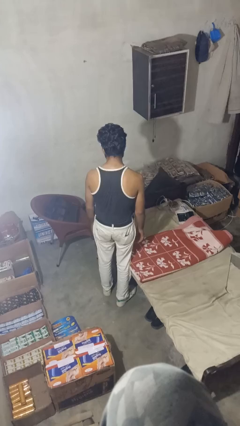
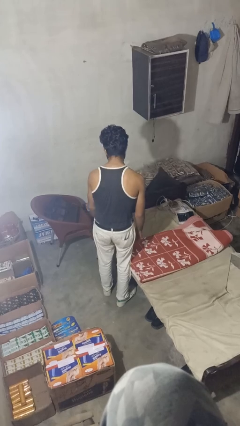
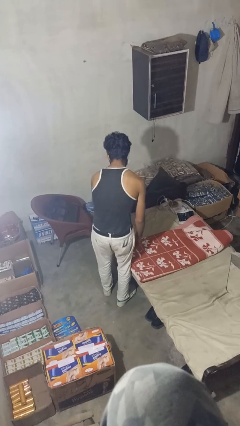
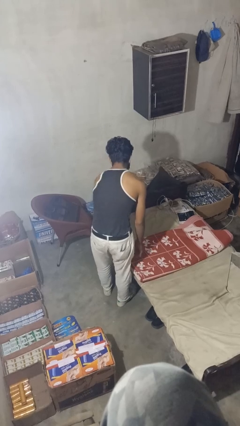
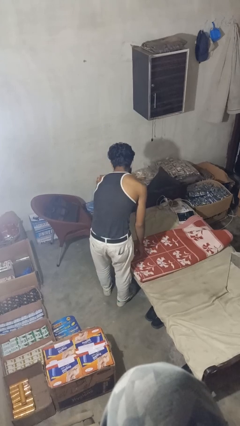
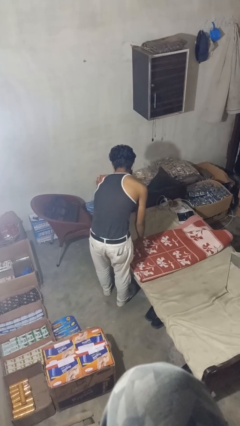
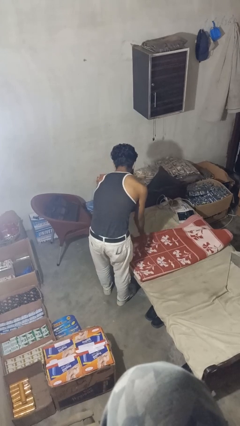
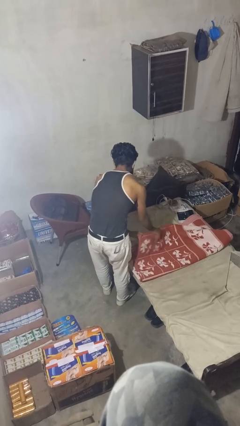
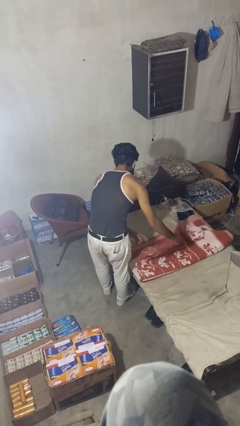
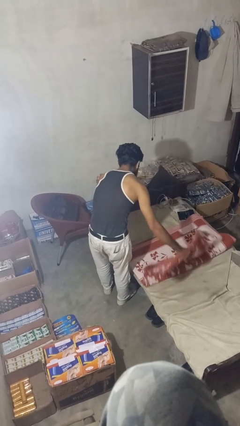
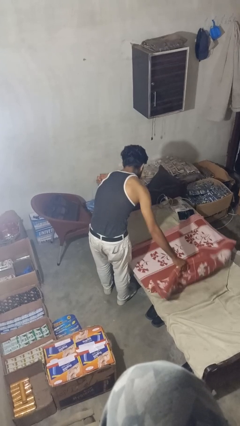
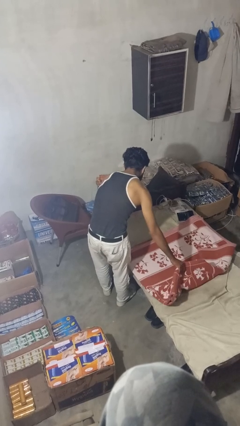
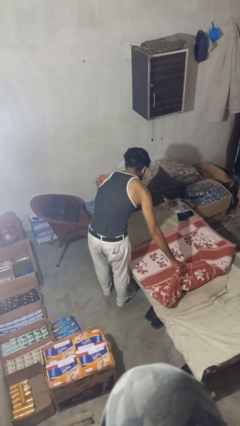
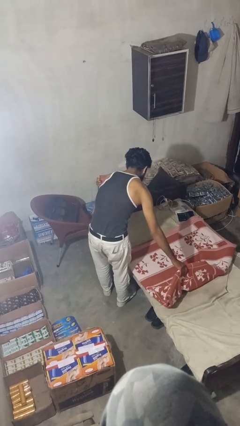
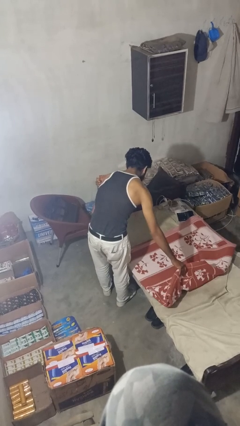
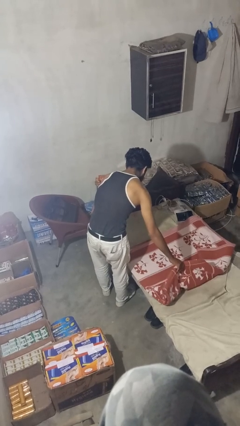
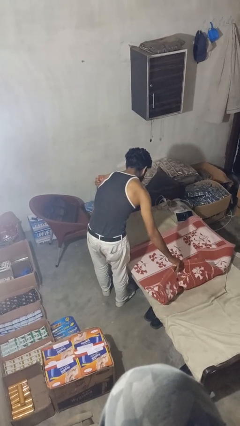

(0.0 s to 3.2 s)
person makes bed

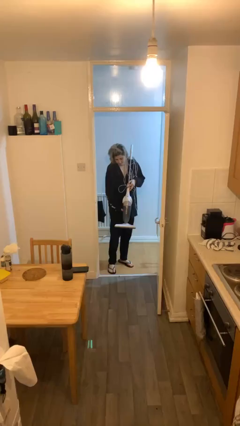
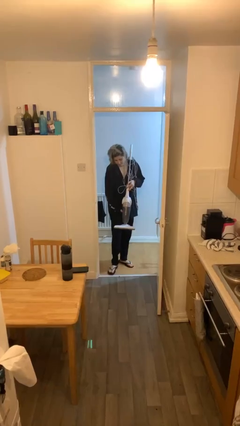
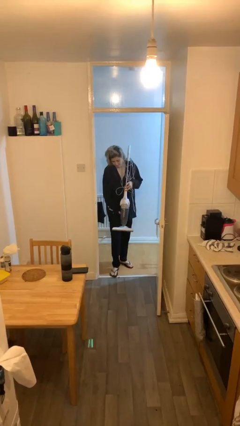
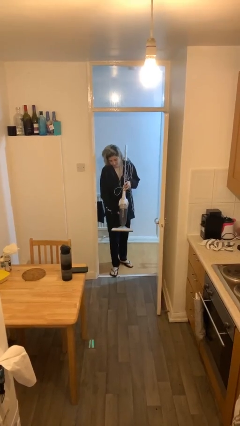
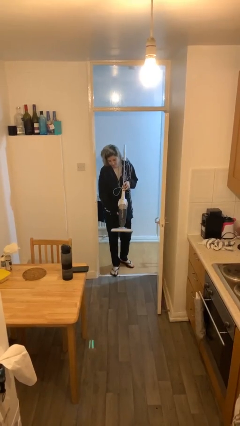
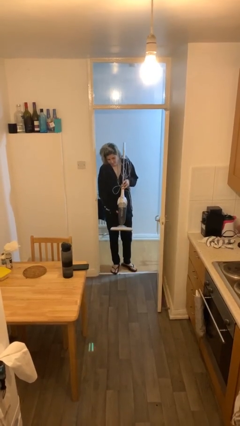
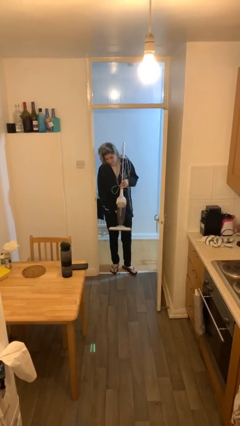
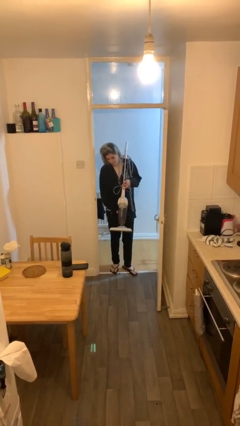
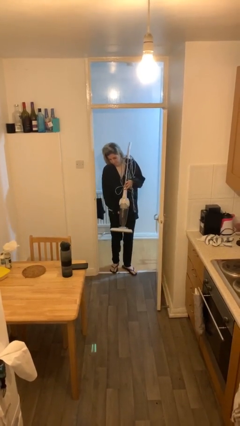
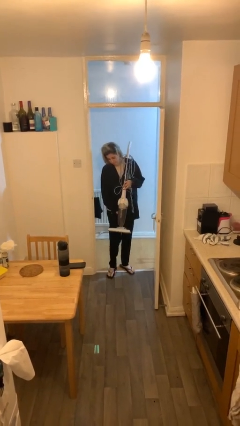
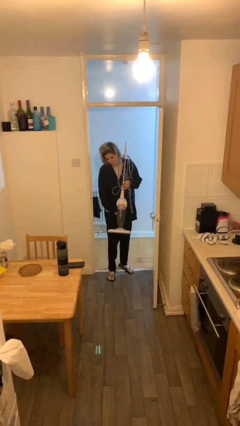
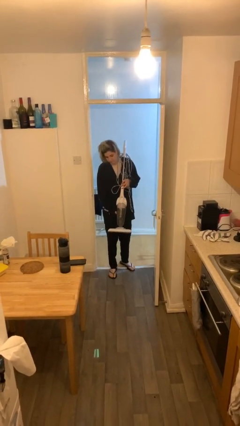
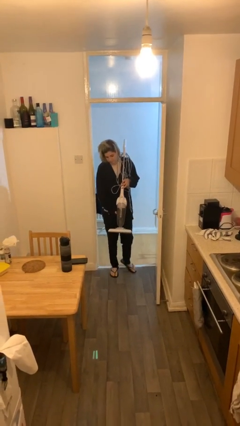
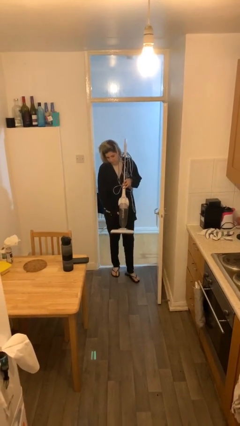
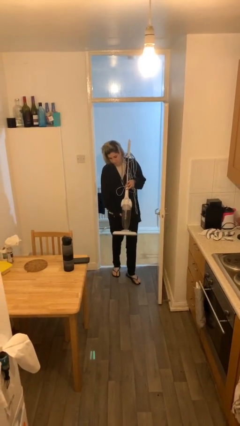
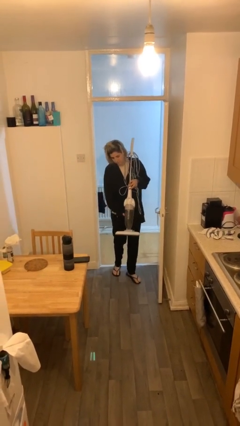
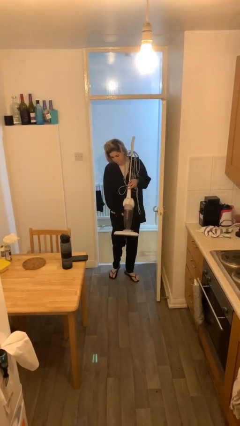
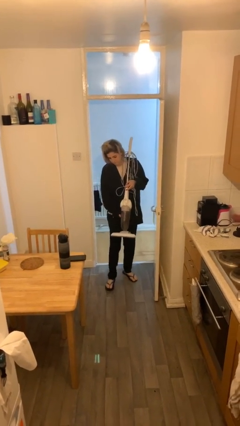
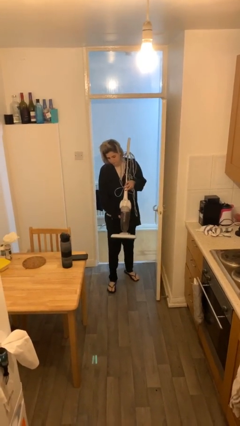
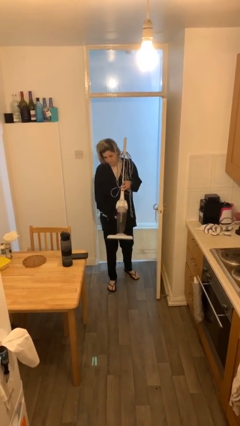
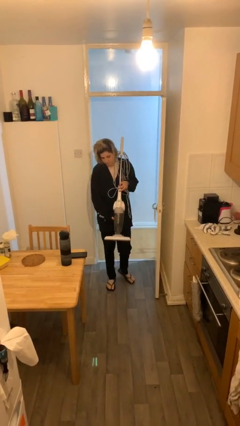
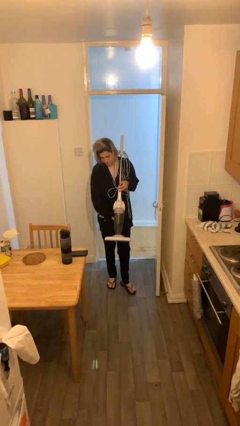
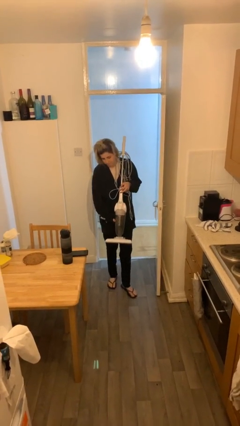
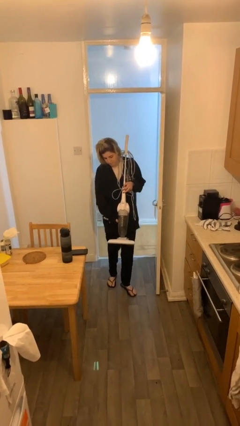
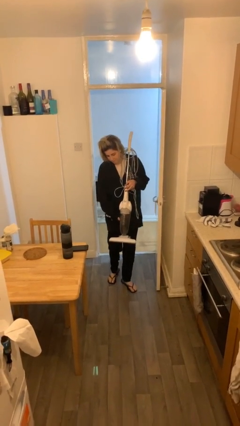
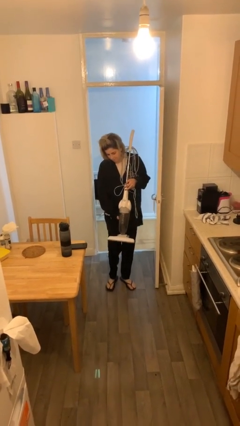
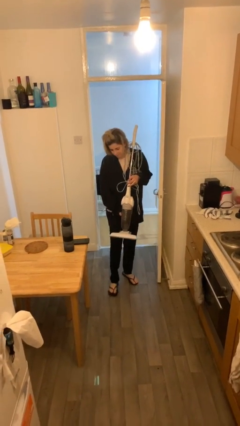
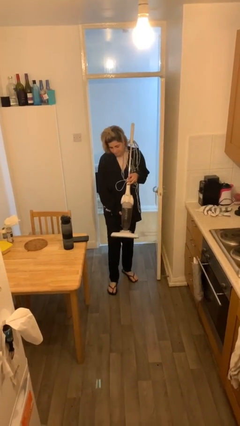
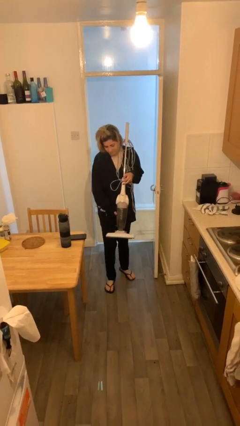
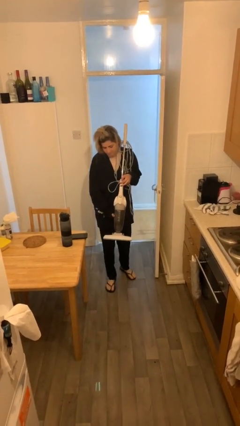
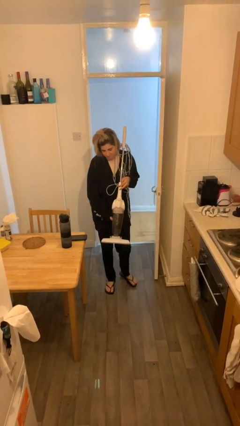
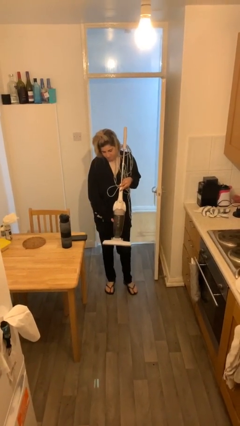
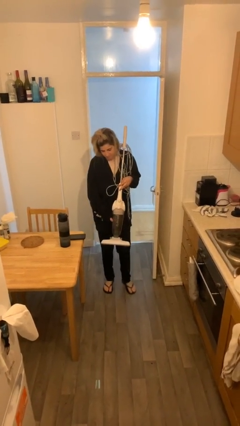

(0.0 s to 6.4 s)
person carries heavy object

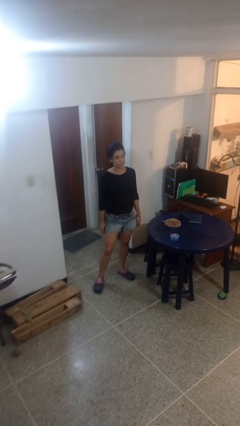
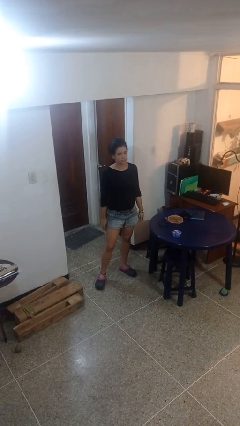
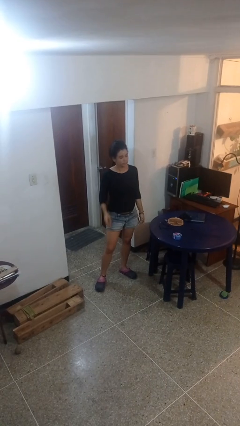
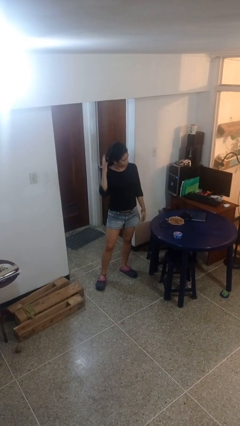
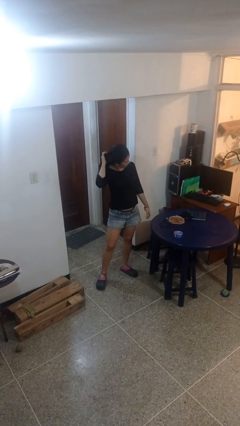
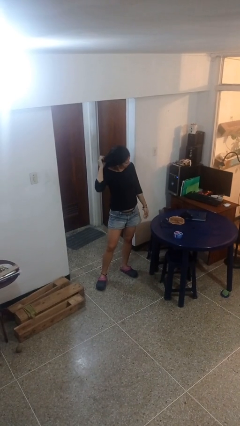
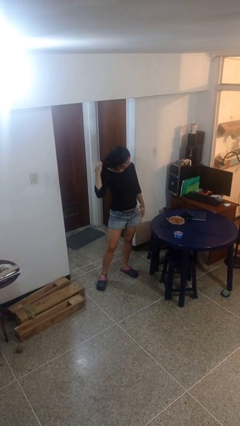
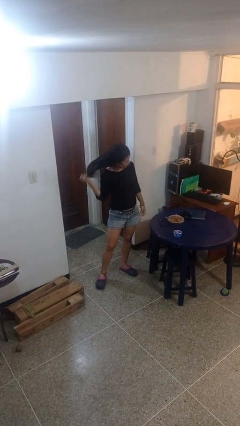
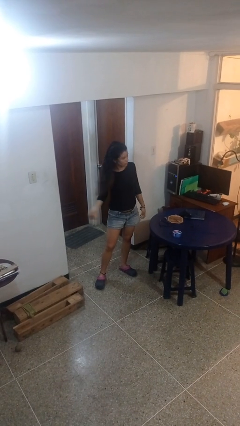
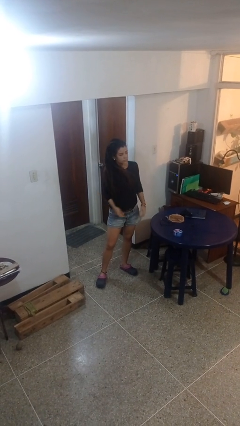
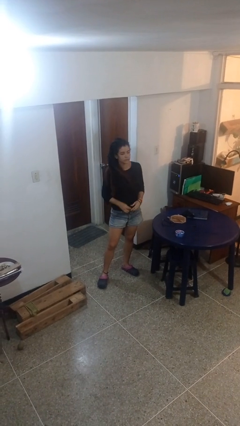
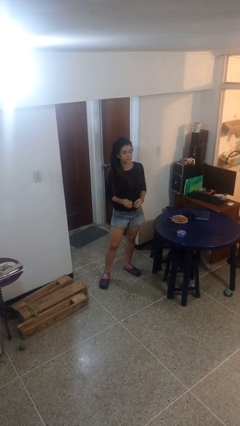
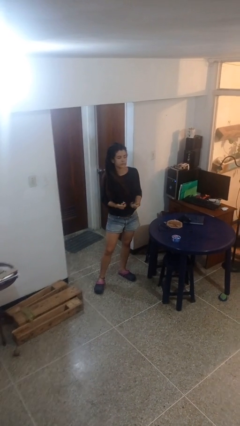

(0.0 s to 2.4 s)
person takes off hairtie

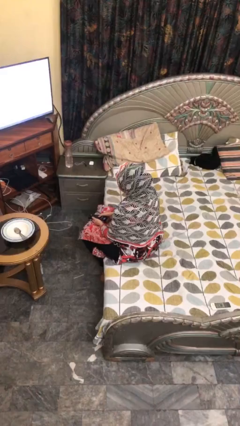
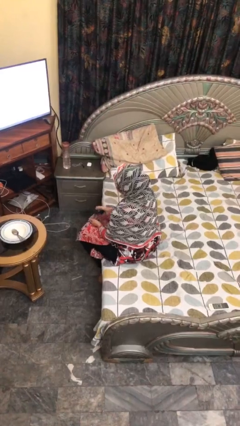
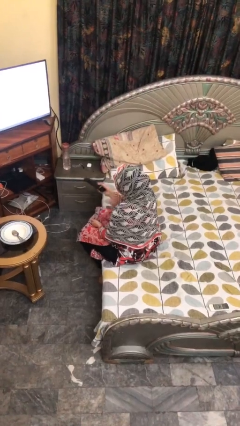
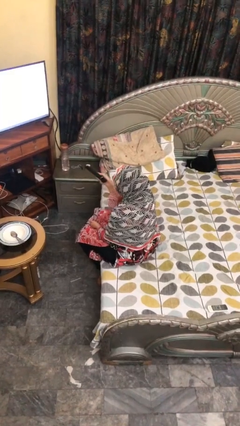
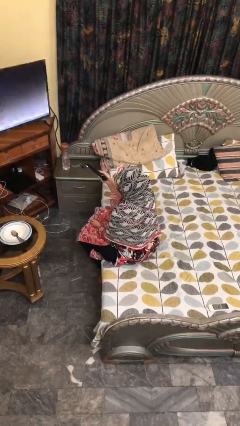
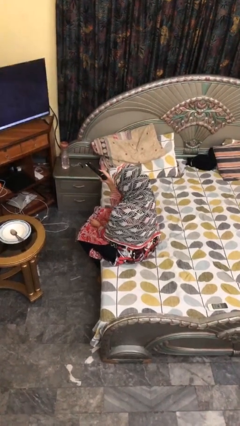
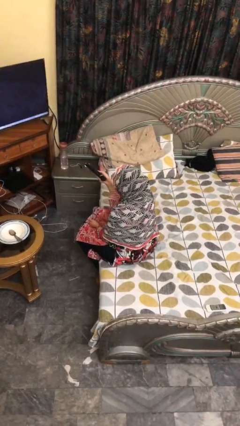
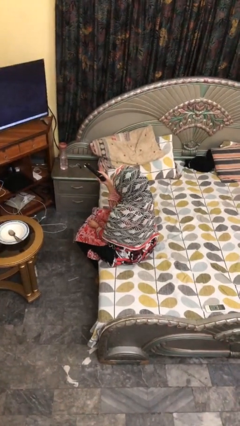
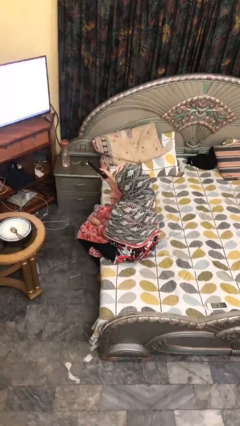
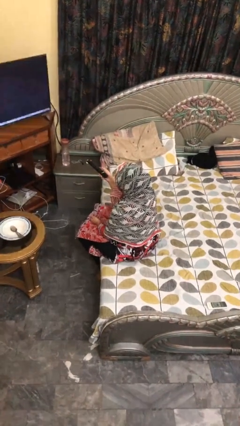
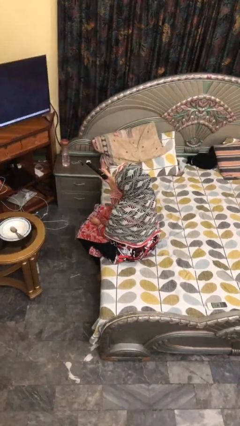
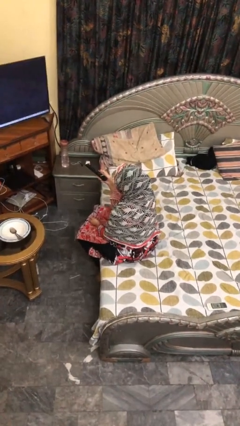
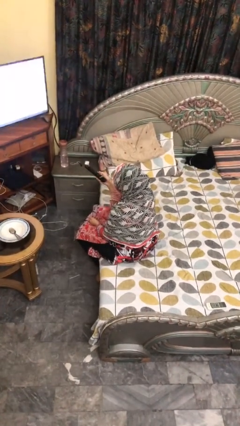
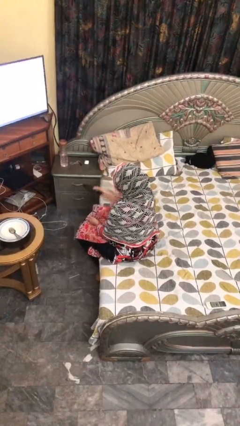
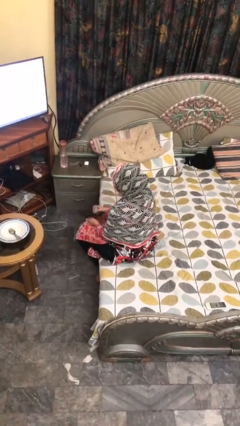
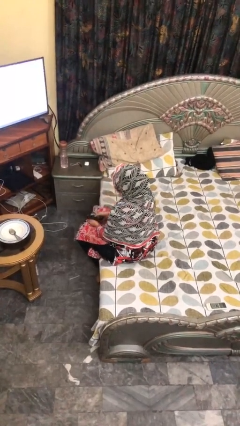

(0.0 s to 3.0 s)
person uses television remote

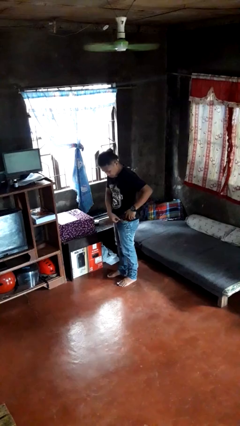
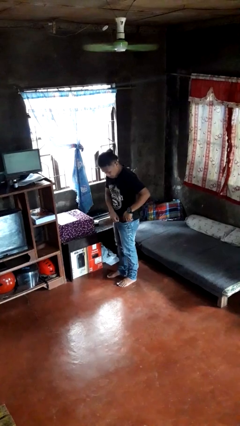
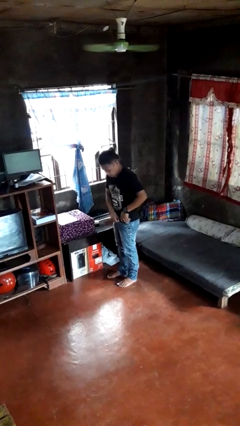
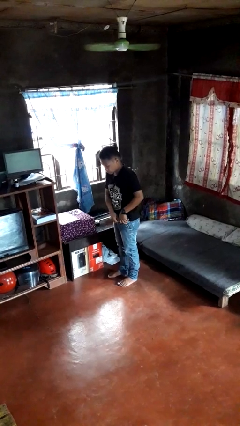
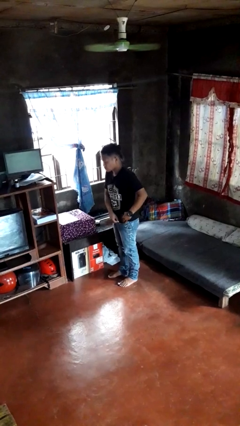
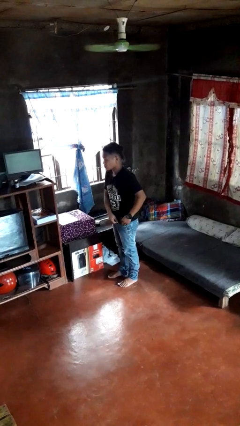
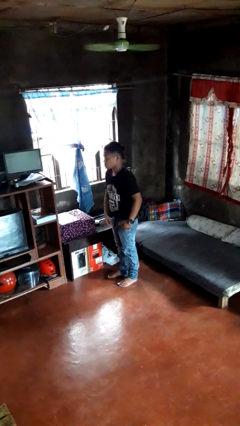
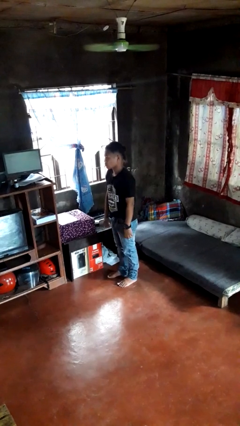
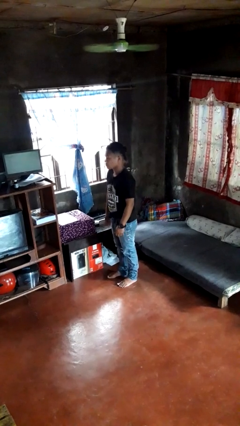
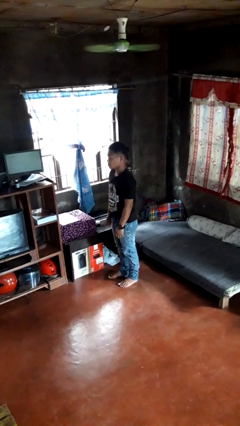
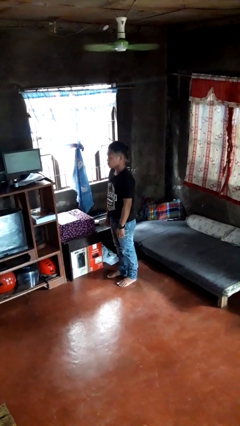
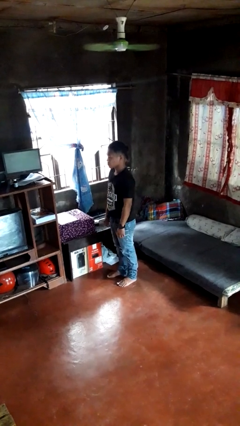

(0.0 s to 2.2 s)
person puts phone into pocket

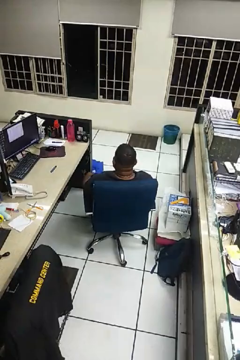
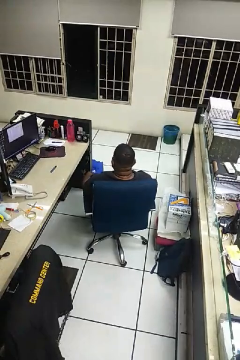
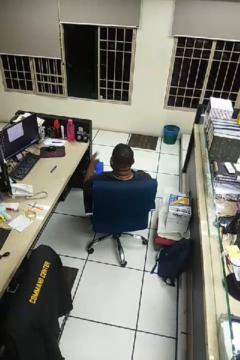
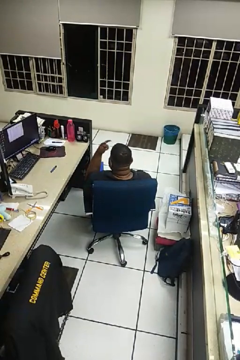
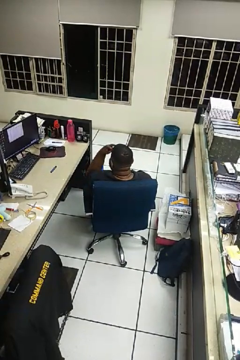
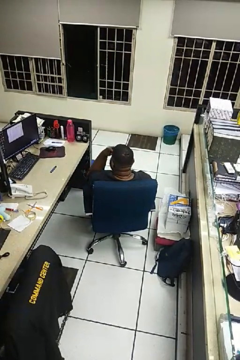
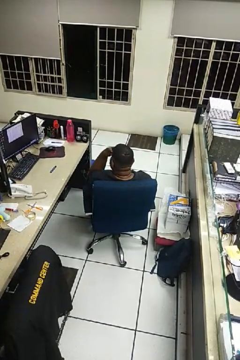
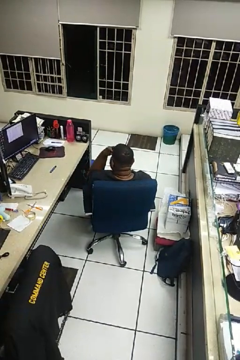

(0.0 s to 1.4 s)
person gestures watch closely
